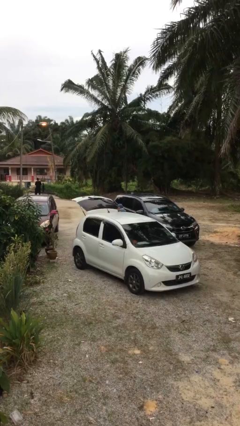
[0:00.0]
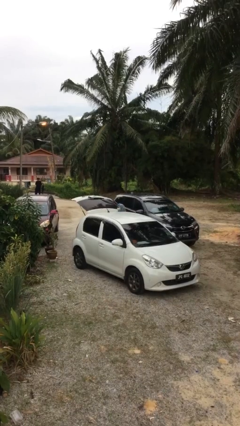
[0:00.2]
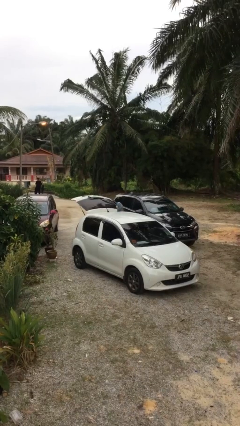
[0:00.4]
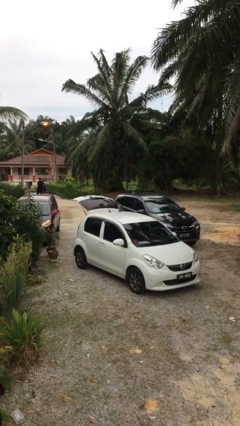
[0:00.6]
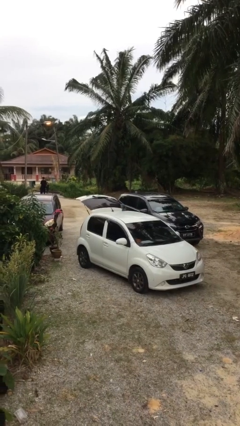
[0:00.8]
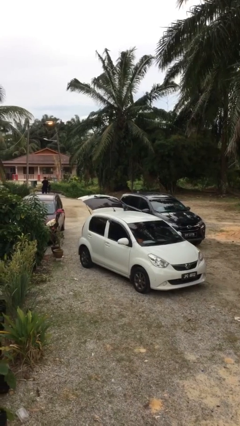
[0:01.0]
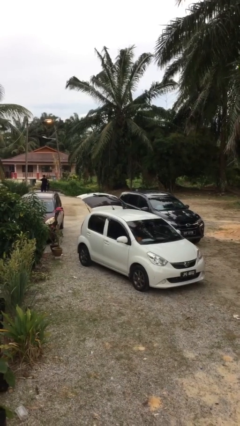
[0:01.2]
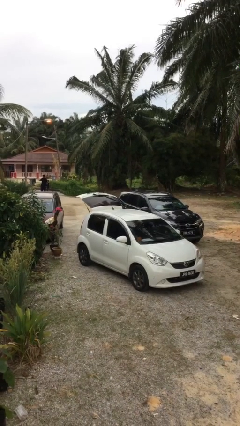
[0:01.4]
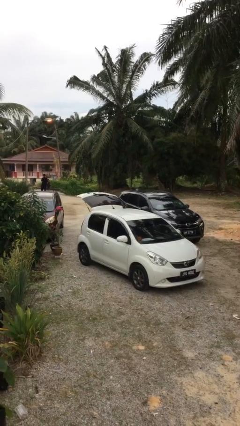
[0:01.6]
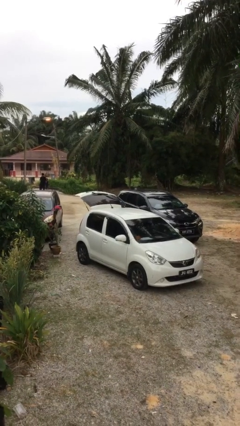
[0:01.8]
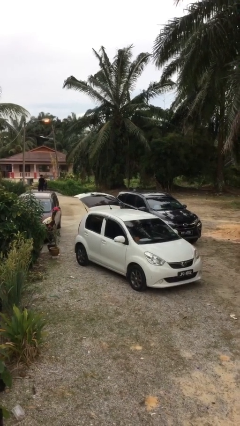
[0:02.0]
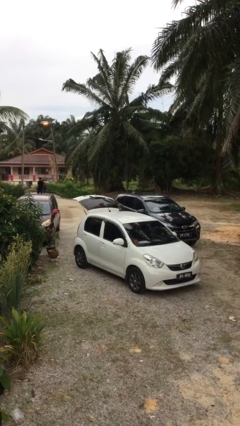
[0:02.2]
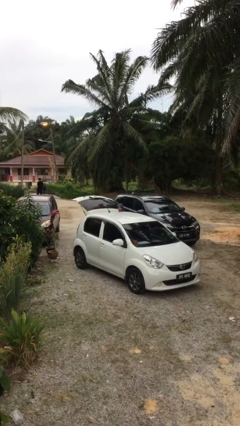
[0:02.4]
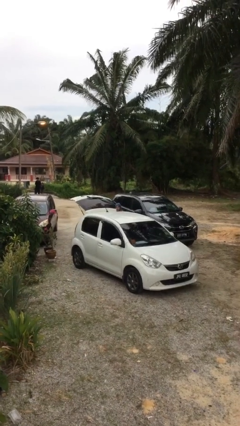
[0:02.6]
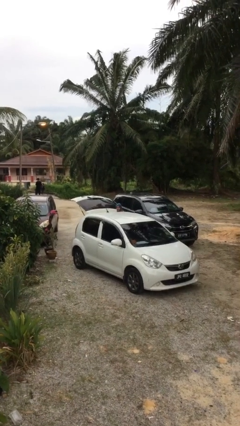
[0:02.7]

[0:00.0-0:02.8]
person loads car

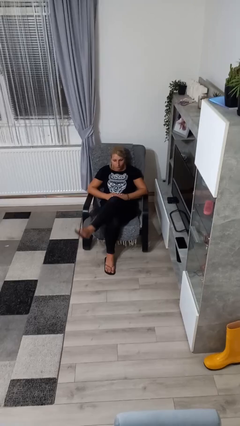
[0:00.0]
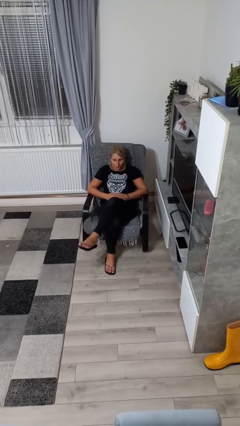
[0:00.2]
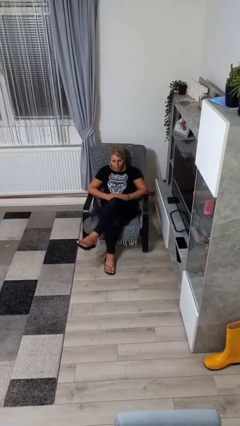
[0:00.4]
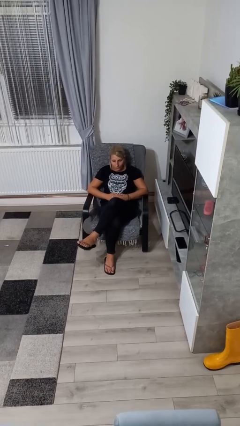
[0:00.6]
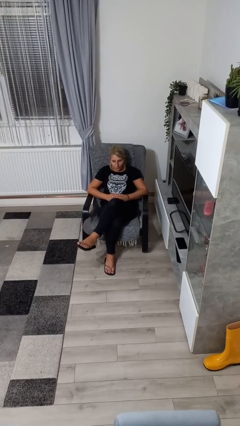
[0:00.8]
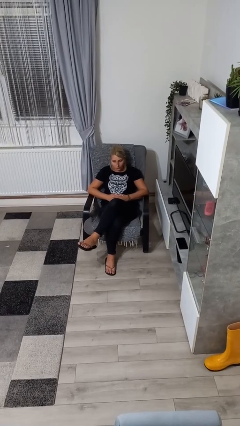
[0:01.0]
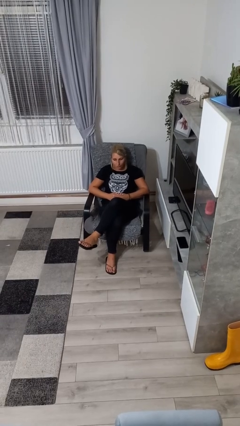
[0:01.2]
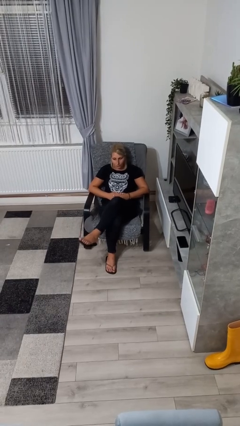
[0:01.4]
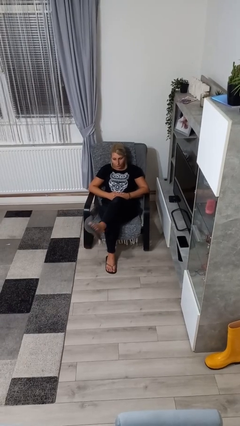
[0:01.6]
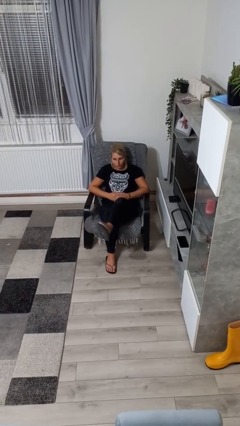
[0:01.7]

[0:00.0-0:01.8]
person crosses legs

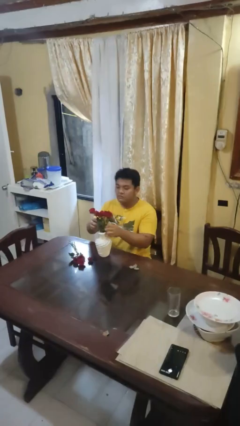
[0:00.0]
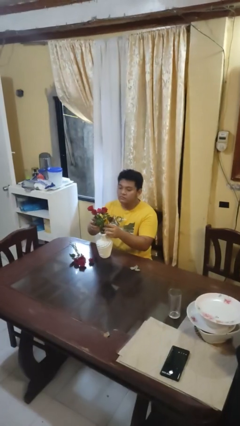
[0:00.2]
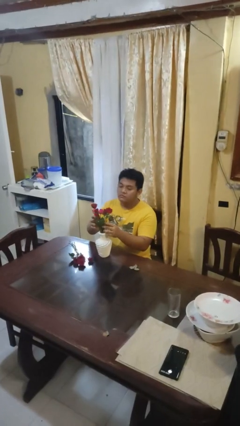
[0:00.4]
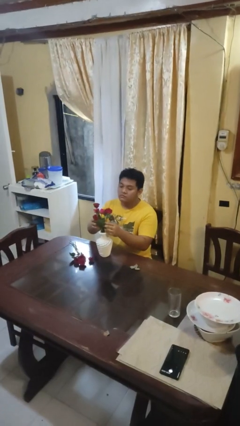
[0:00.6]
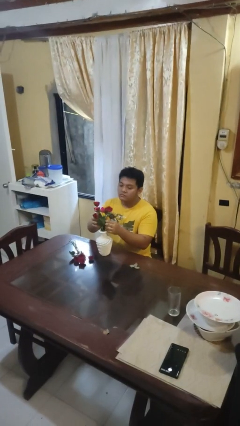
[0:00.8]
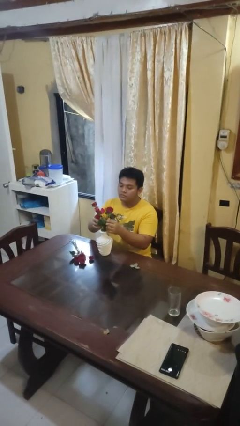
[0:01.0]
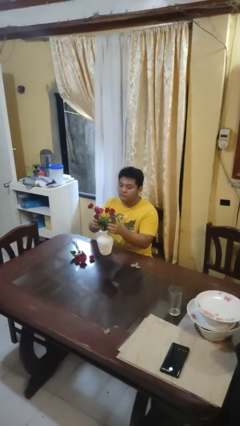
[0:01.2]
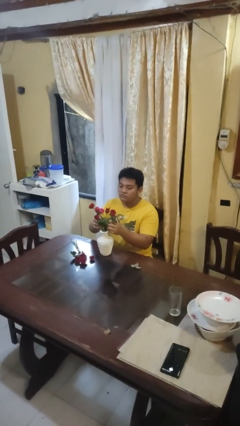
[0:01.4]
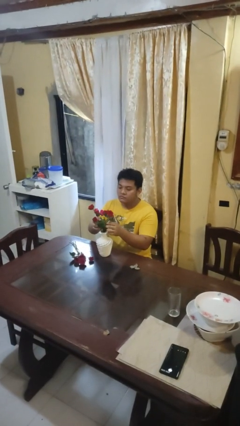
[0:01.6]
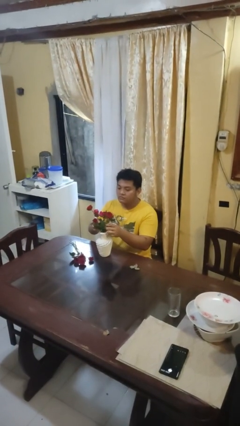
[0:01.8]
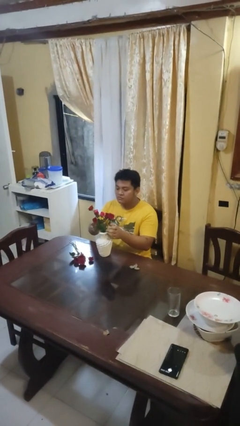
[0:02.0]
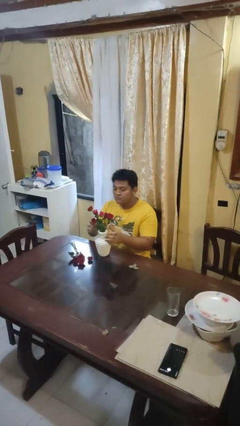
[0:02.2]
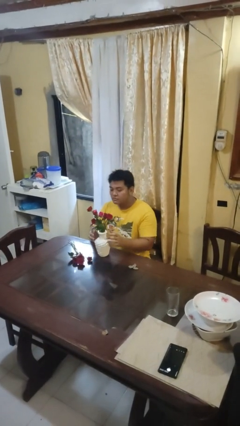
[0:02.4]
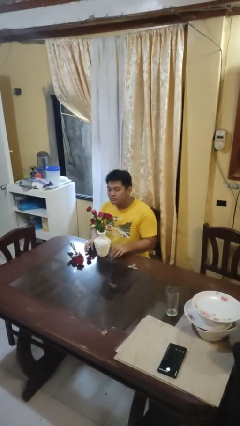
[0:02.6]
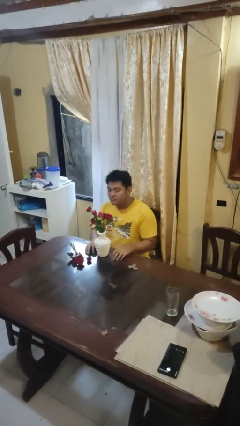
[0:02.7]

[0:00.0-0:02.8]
person arranges flowers in vase

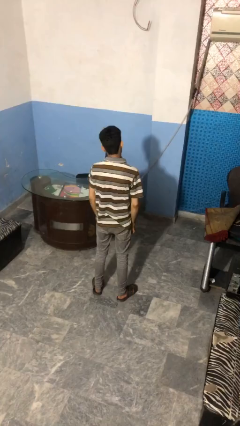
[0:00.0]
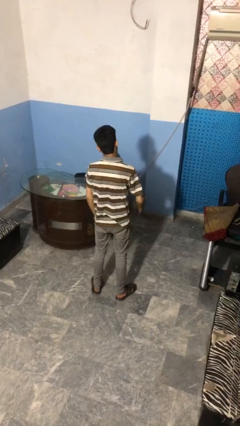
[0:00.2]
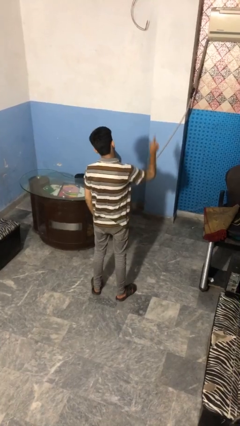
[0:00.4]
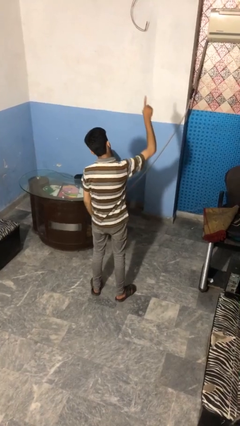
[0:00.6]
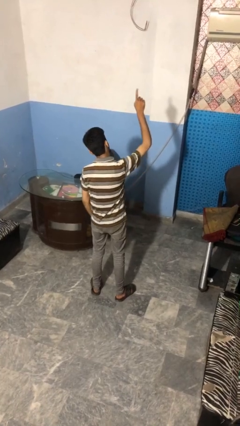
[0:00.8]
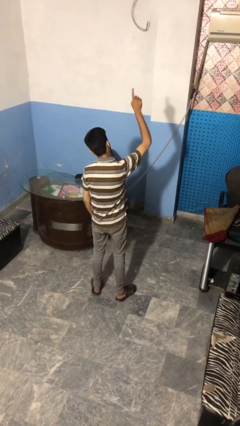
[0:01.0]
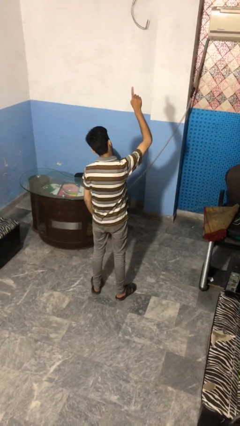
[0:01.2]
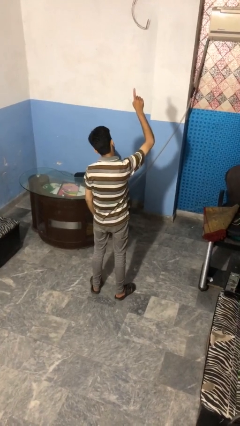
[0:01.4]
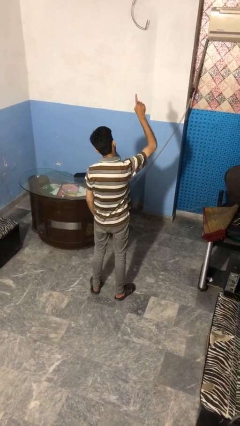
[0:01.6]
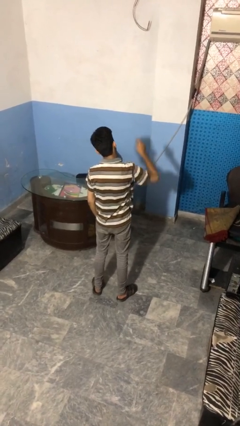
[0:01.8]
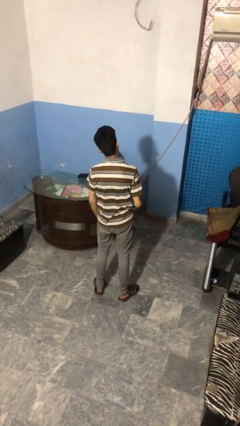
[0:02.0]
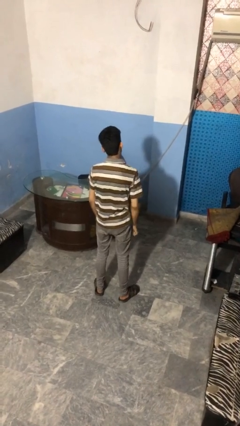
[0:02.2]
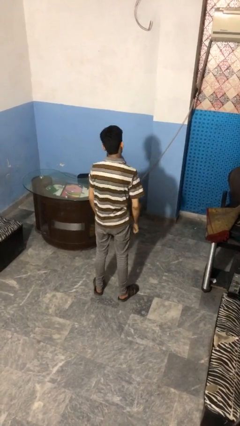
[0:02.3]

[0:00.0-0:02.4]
person gestures number one

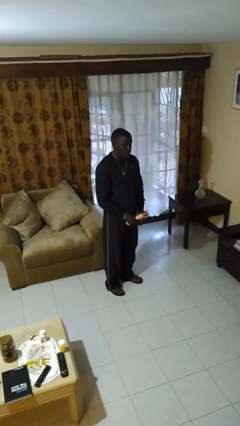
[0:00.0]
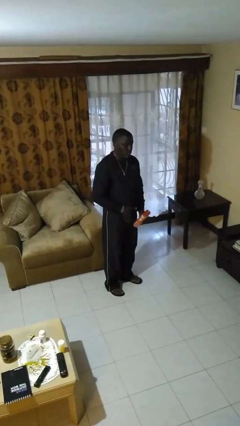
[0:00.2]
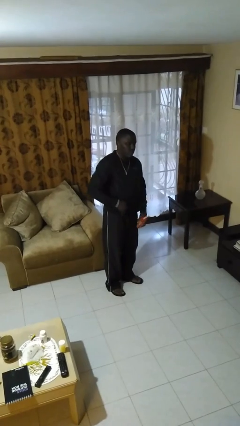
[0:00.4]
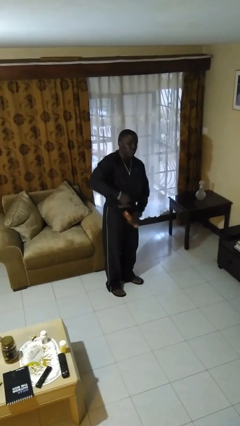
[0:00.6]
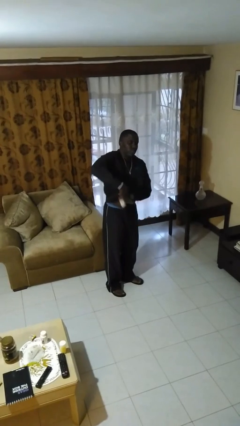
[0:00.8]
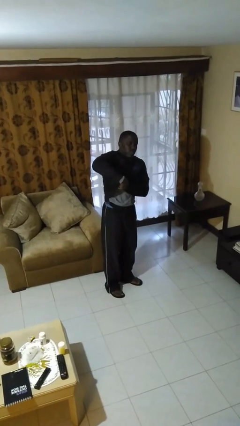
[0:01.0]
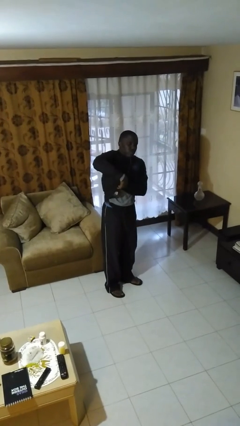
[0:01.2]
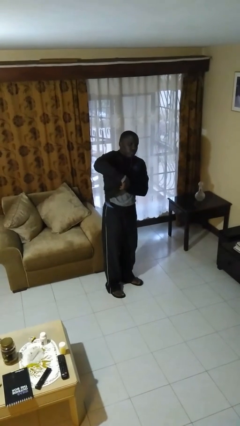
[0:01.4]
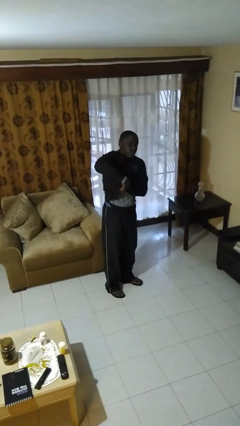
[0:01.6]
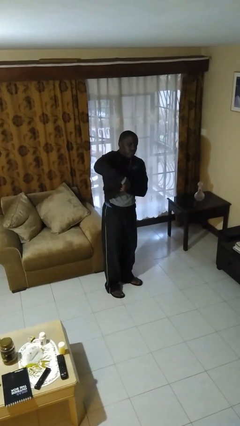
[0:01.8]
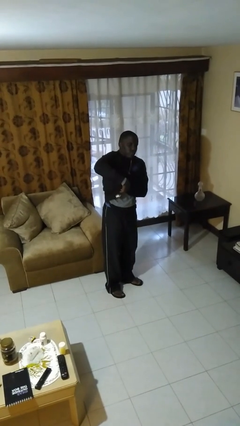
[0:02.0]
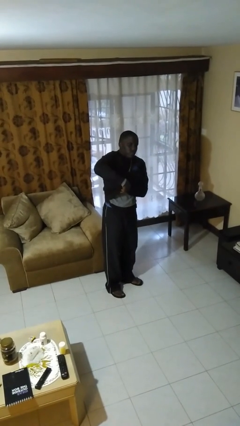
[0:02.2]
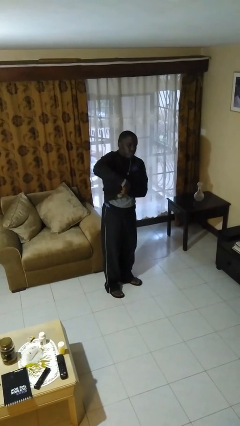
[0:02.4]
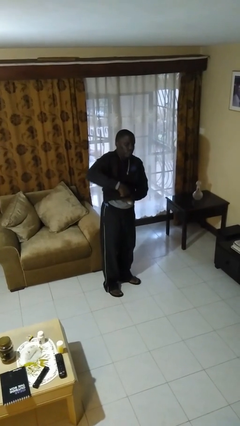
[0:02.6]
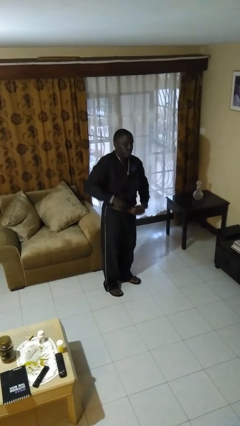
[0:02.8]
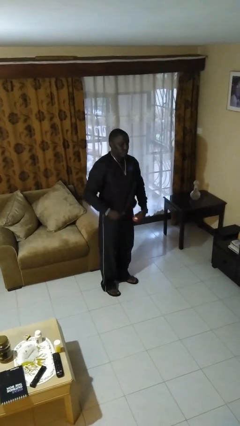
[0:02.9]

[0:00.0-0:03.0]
person applies deodorant

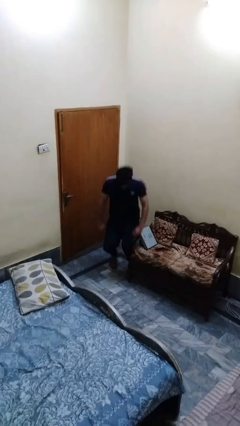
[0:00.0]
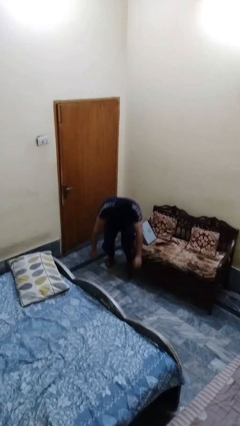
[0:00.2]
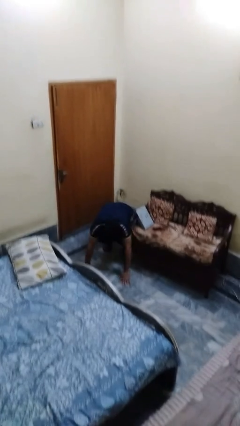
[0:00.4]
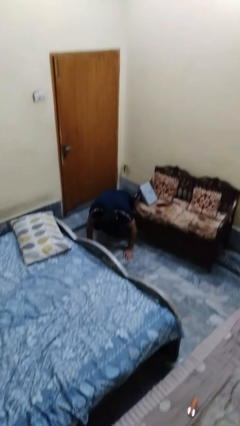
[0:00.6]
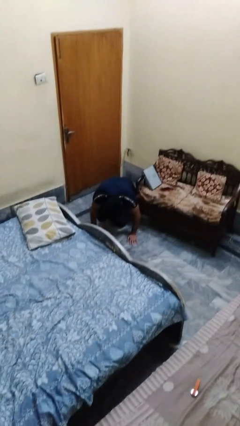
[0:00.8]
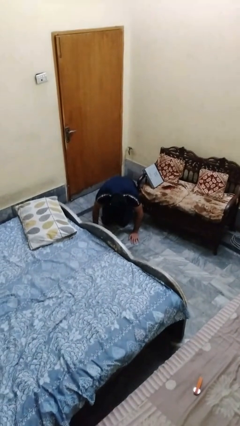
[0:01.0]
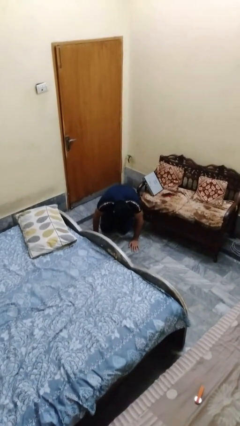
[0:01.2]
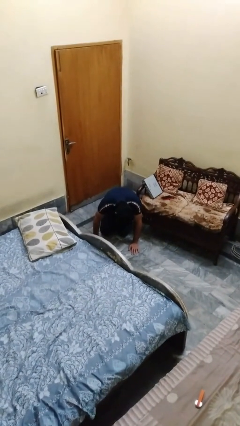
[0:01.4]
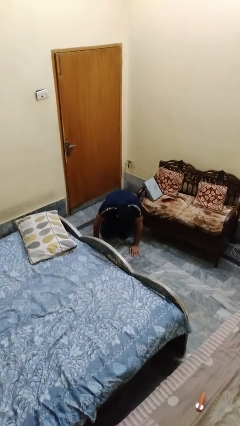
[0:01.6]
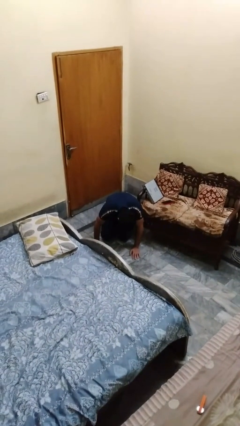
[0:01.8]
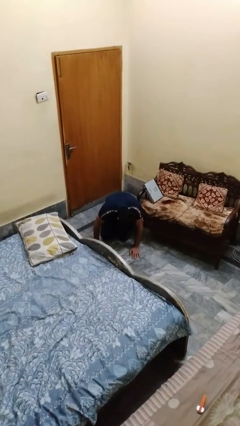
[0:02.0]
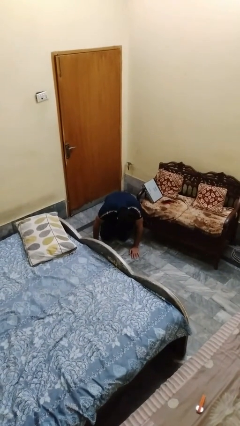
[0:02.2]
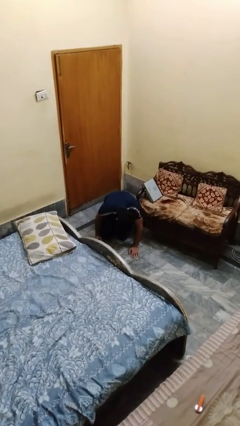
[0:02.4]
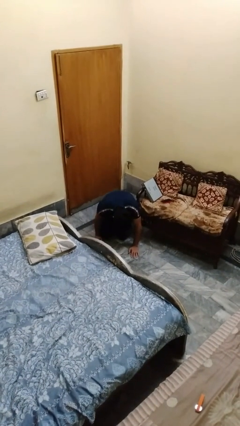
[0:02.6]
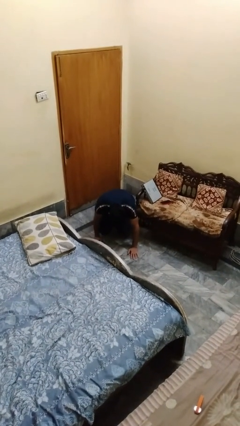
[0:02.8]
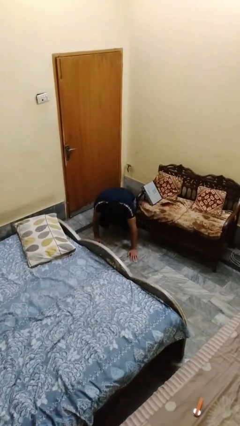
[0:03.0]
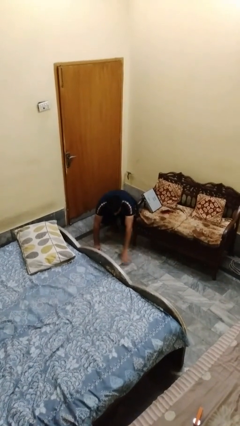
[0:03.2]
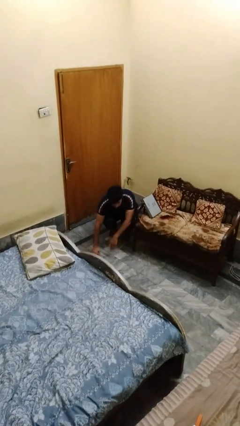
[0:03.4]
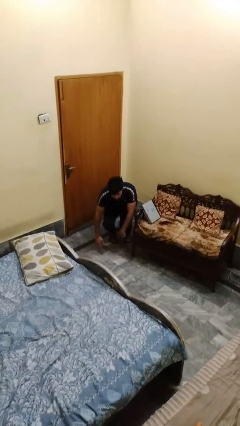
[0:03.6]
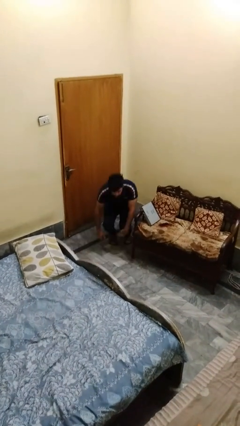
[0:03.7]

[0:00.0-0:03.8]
person trips on object on floor

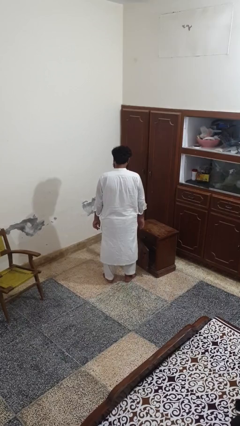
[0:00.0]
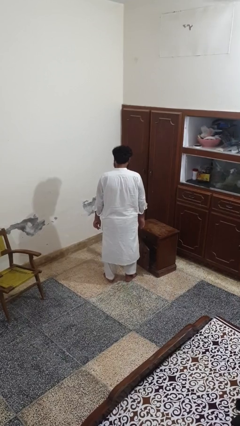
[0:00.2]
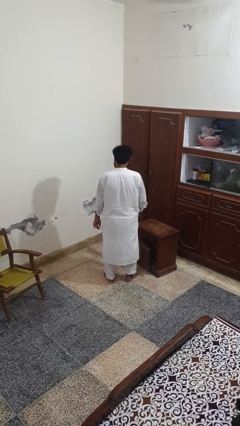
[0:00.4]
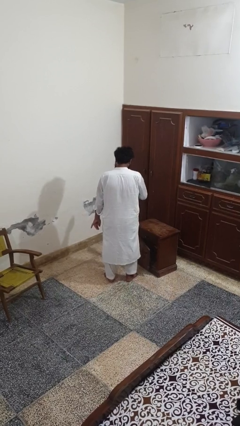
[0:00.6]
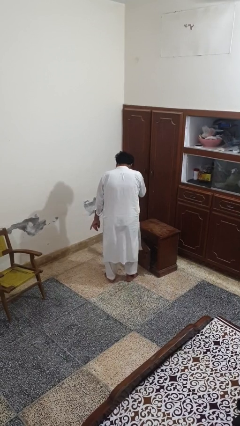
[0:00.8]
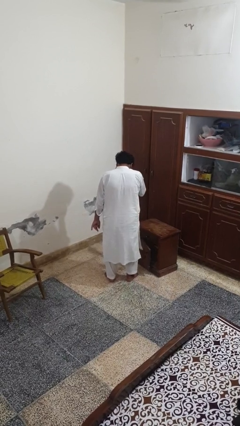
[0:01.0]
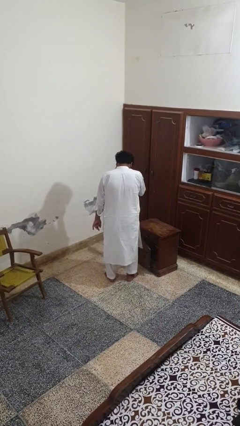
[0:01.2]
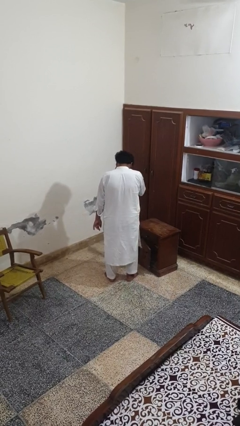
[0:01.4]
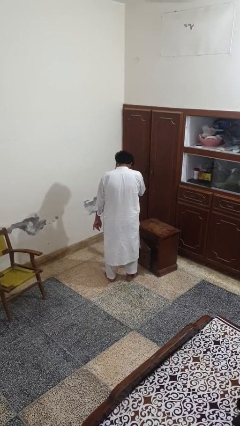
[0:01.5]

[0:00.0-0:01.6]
person sneezes into hand
